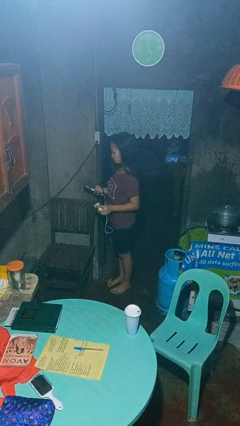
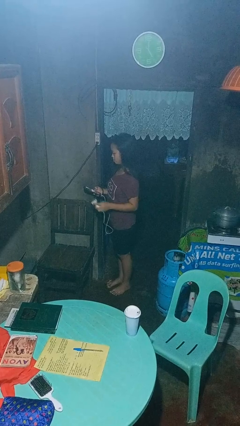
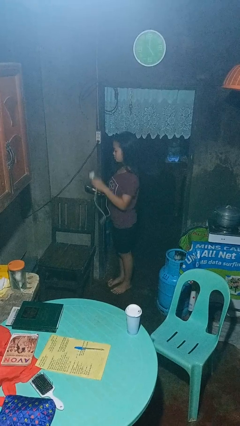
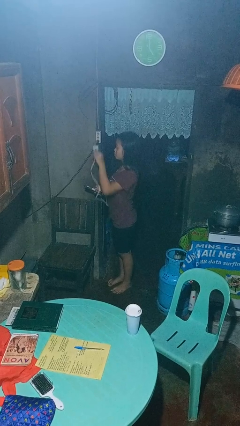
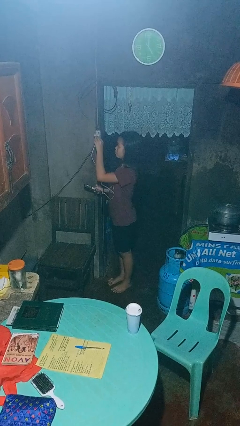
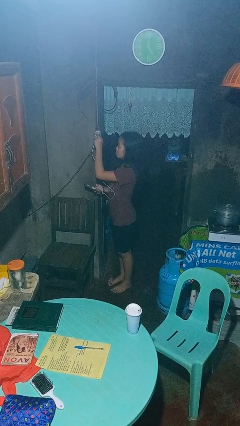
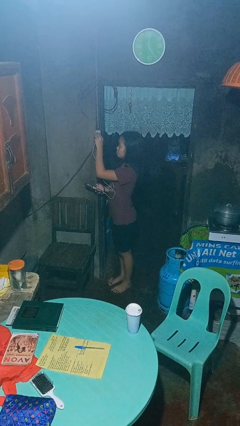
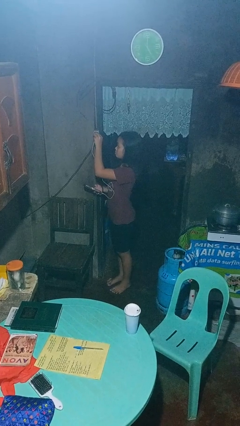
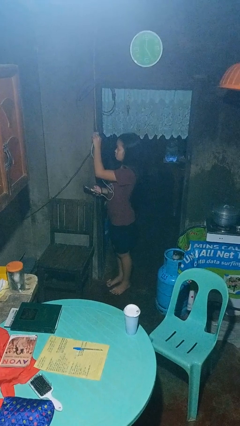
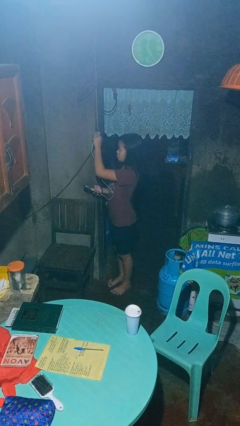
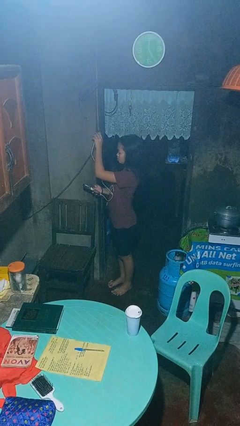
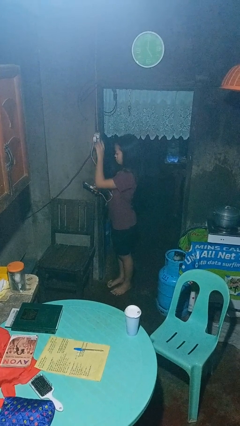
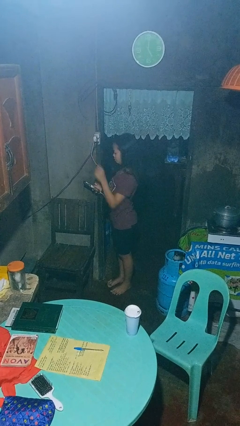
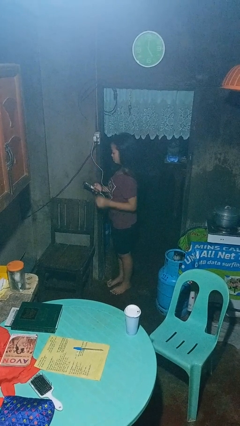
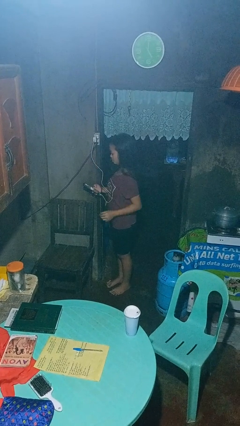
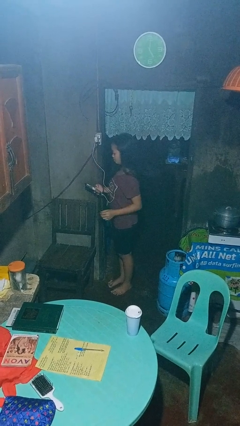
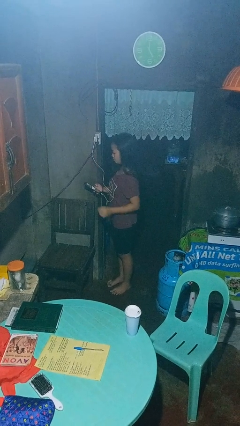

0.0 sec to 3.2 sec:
person plugs into electrical socket

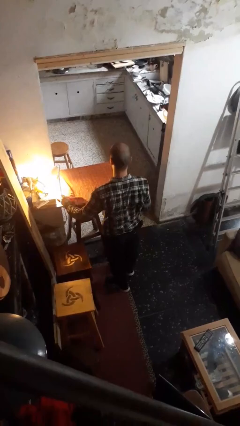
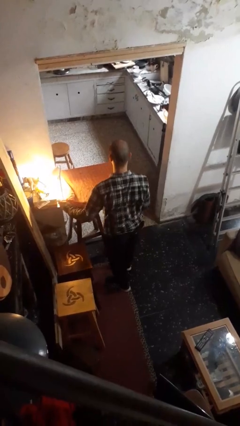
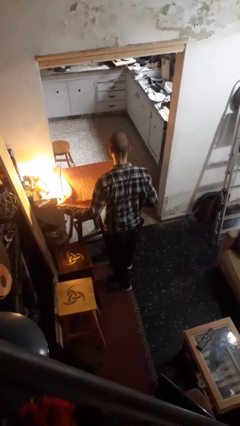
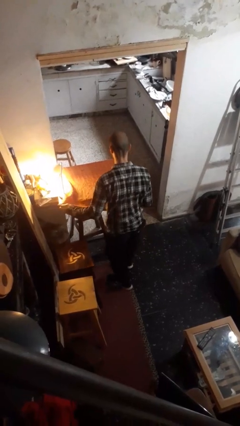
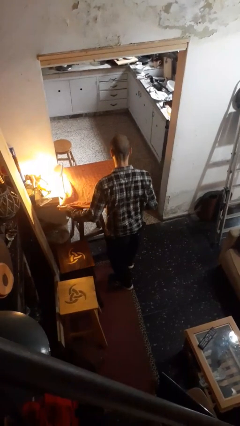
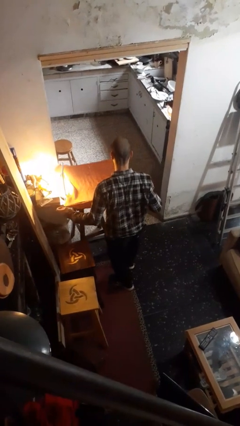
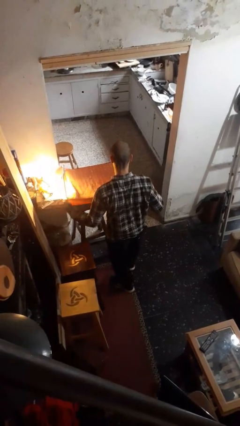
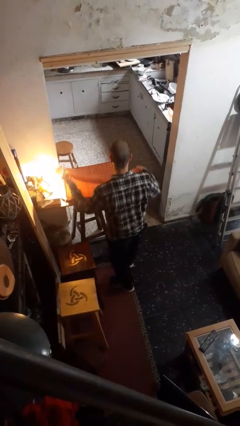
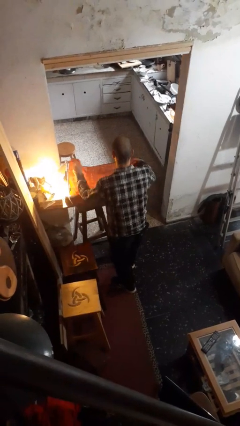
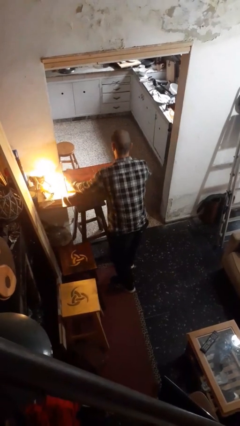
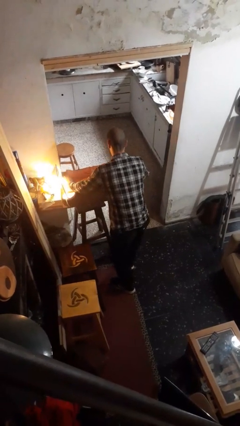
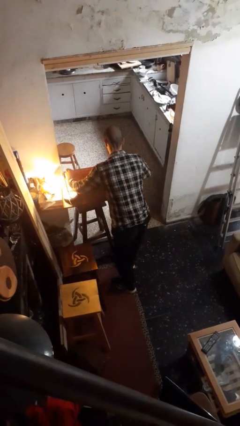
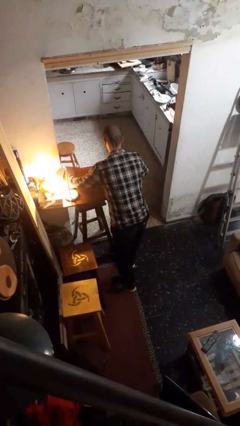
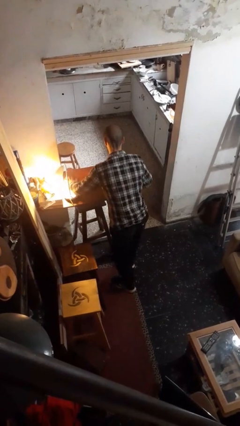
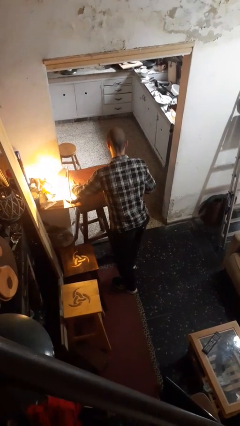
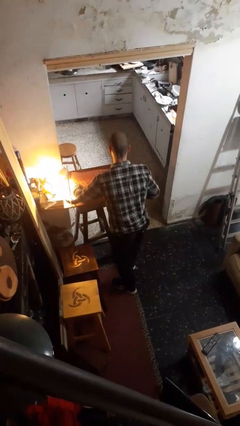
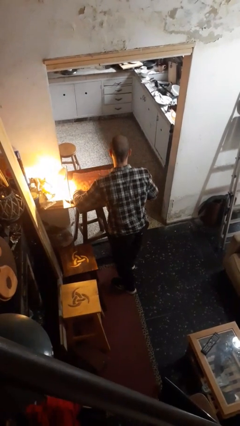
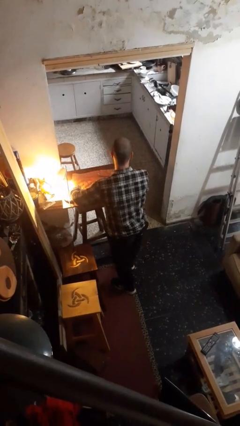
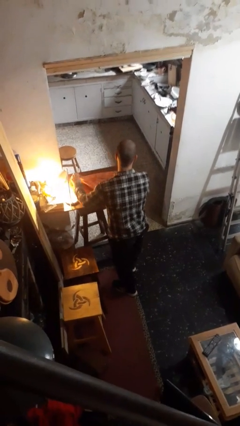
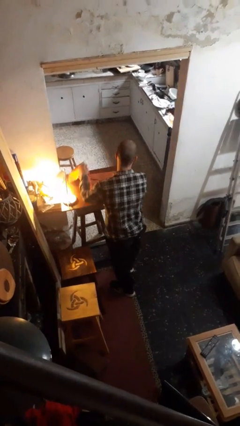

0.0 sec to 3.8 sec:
person folds tablecloth

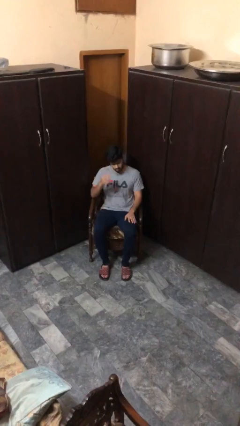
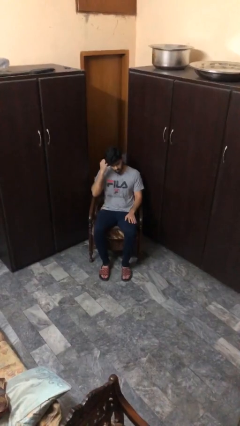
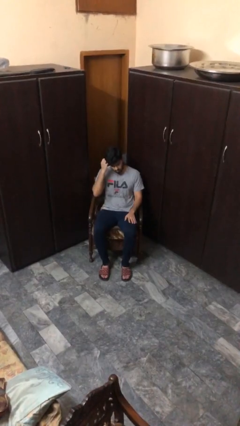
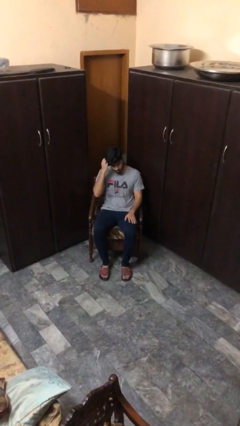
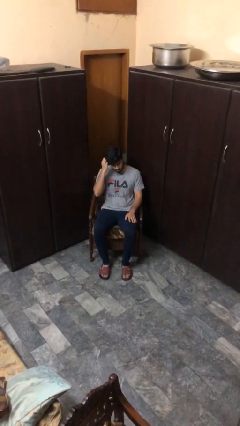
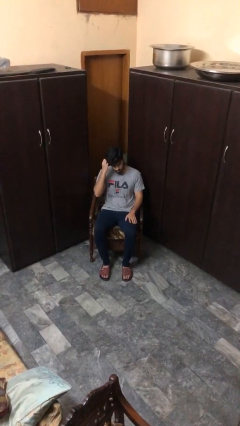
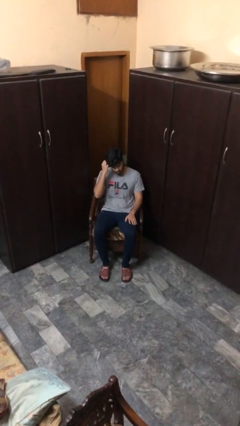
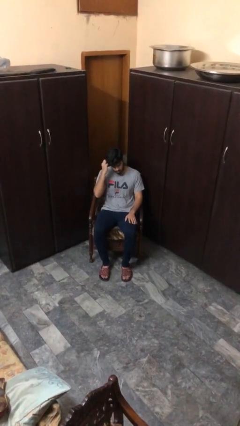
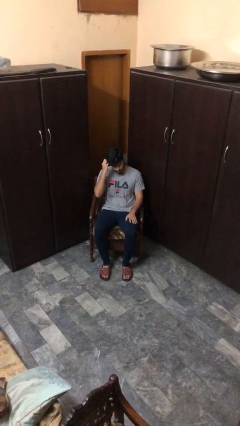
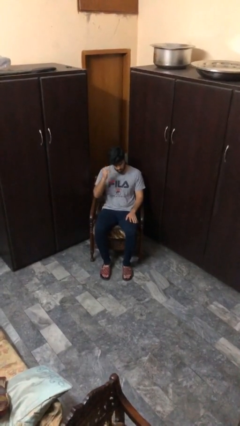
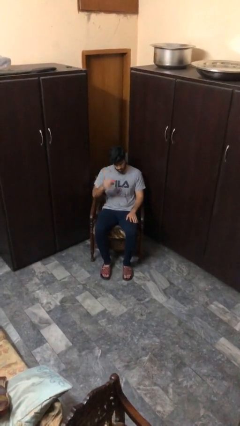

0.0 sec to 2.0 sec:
person scratches face

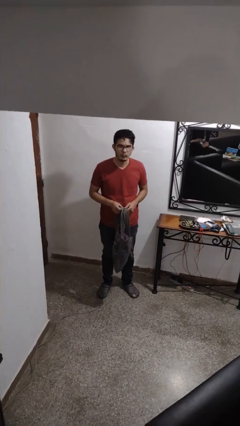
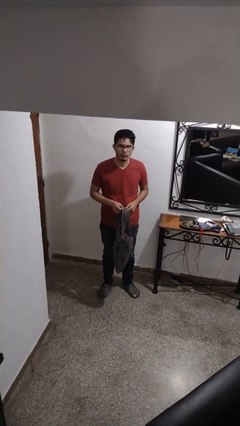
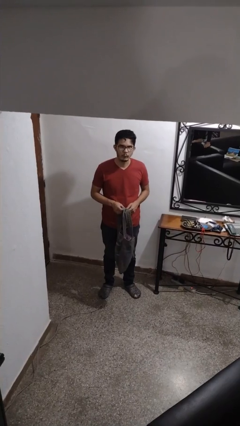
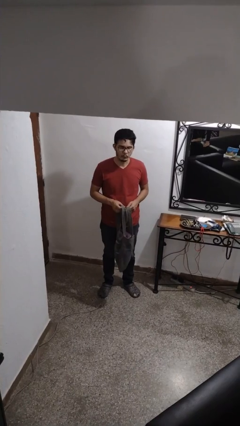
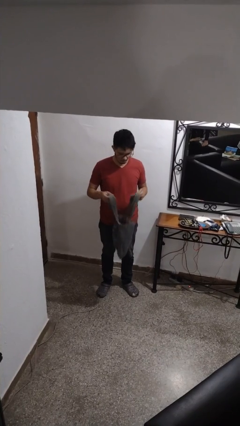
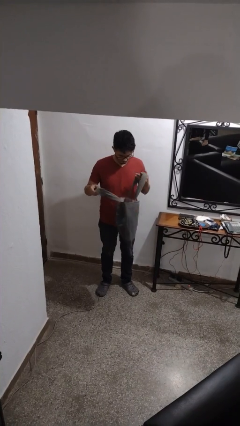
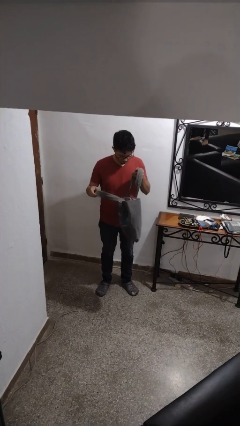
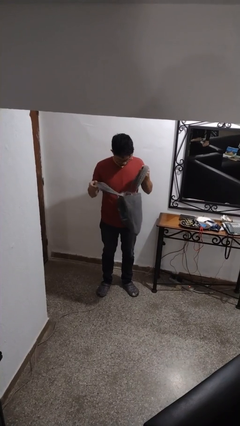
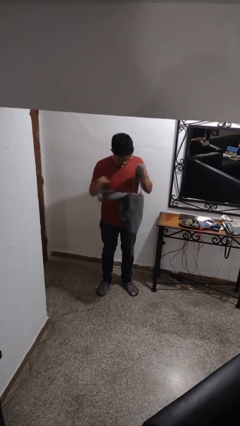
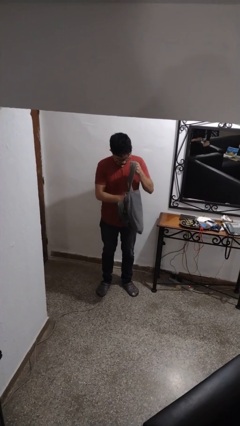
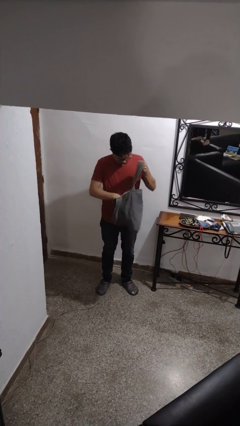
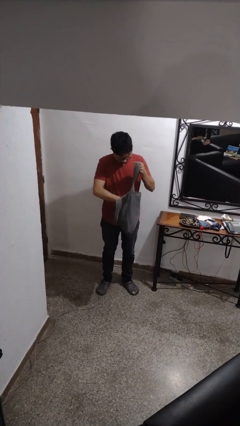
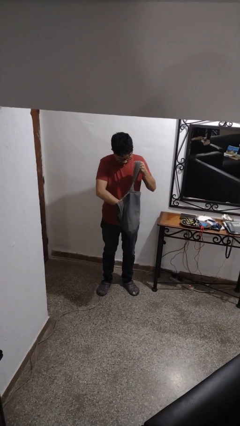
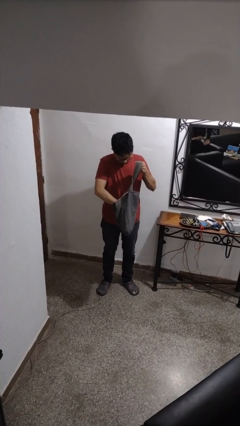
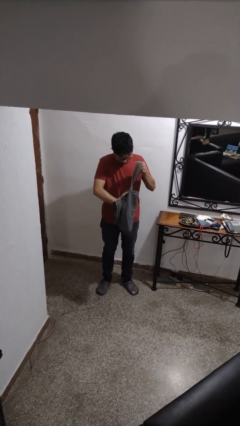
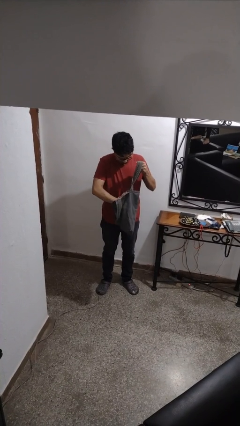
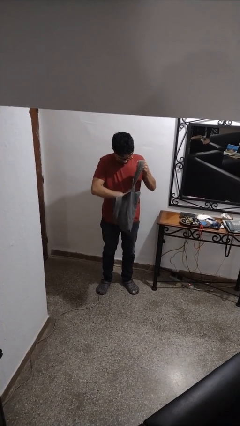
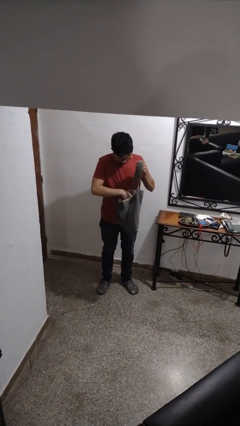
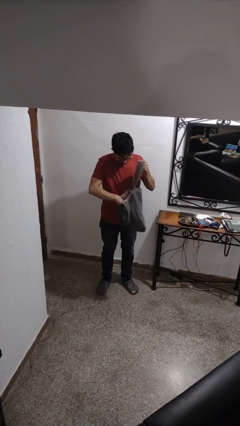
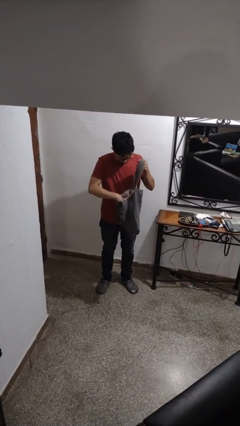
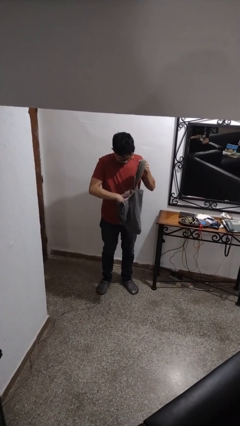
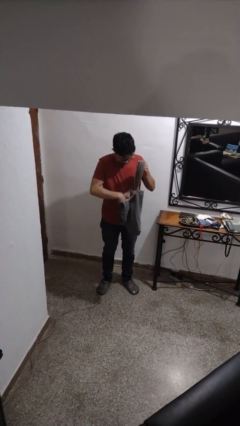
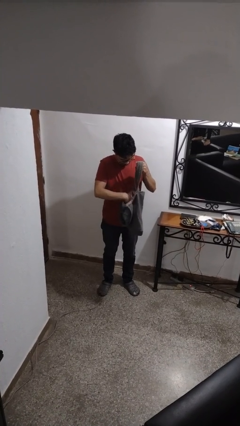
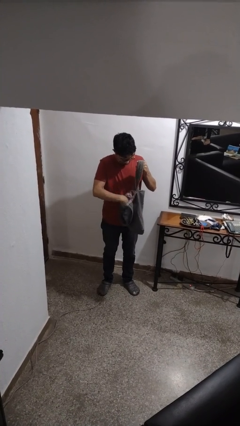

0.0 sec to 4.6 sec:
person searches in purse

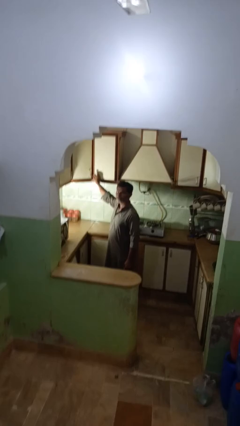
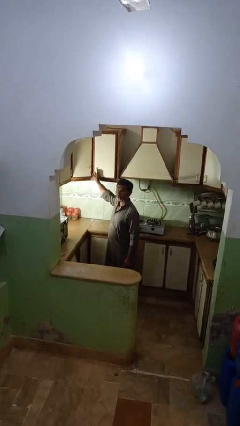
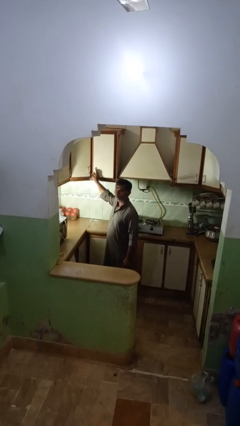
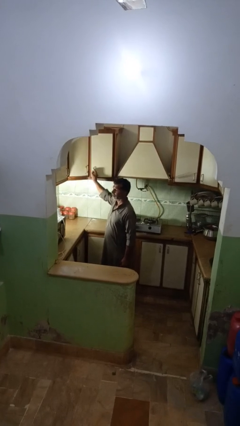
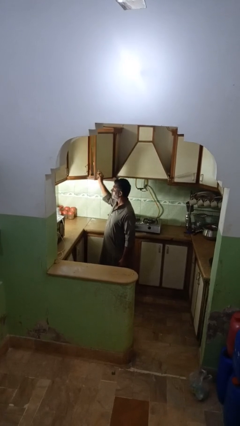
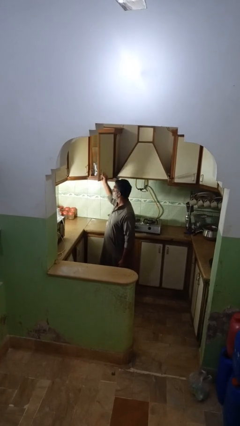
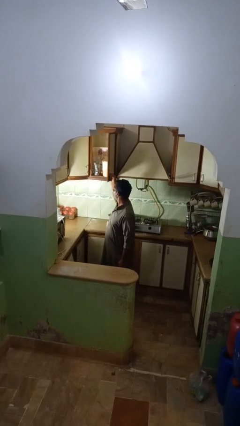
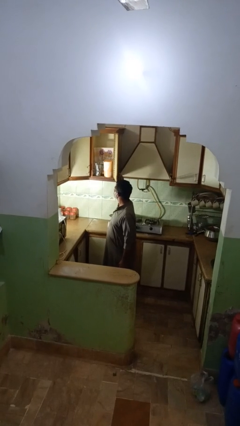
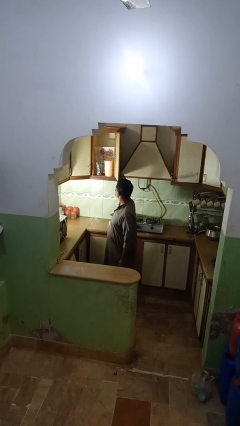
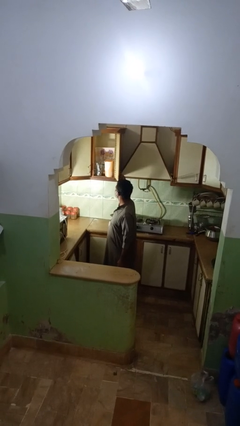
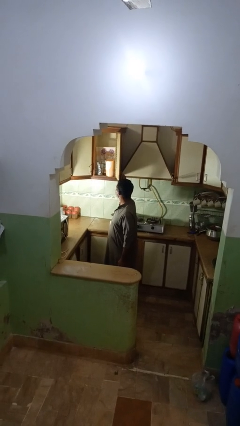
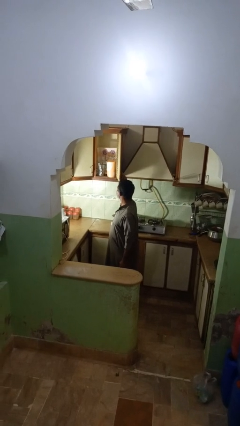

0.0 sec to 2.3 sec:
person opens kitchen drawer

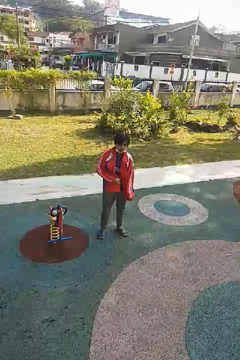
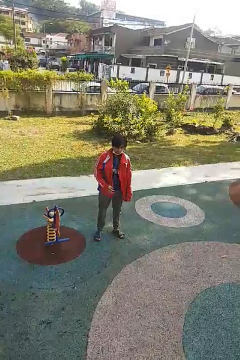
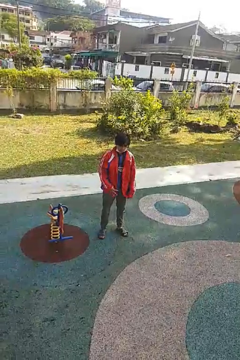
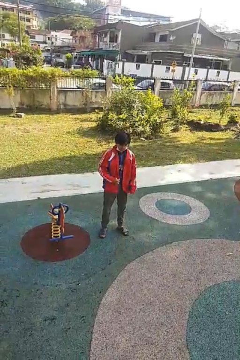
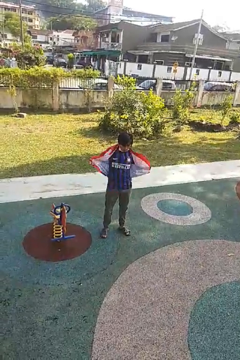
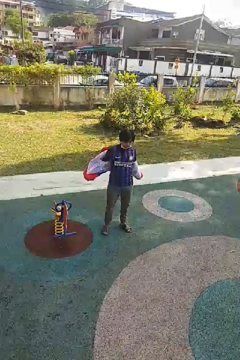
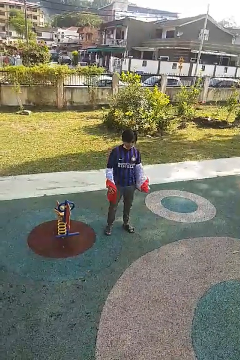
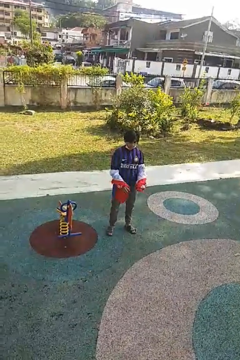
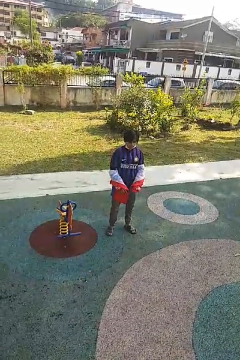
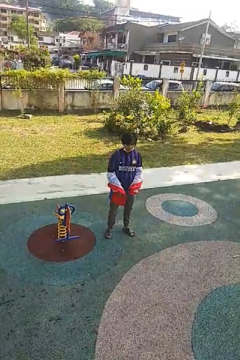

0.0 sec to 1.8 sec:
person takes off jacket

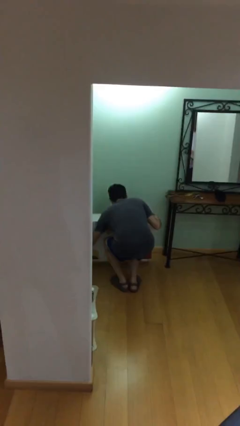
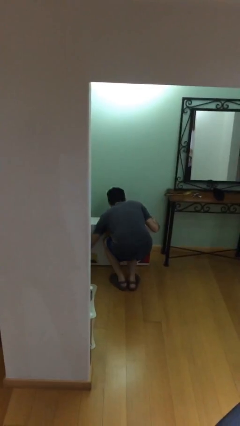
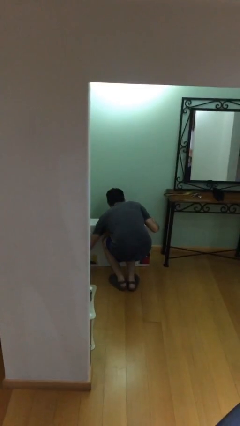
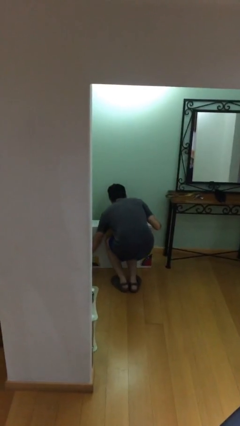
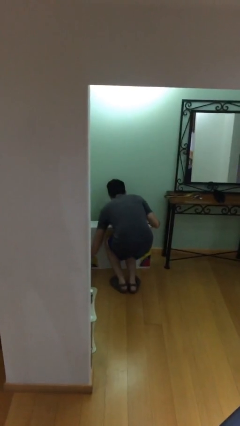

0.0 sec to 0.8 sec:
person puts down object on floor
